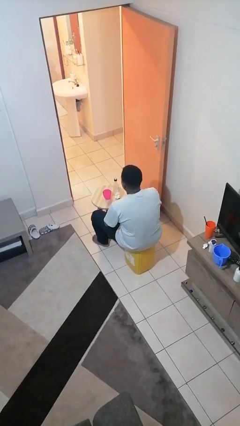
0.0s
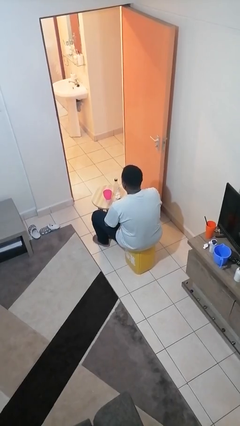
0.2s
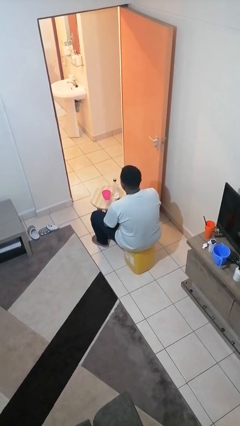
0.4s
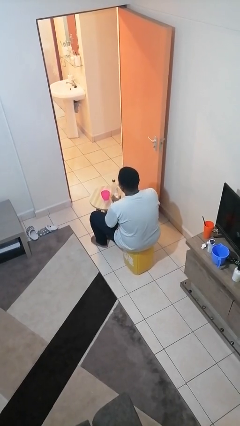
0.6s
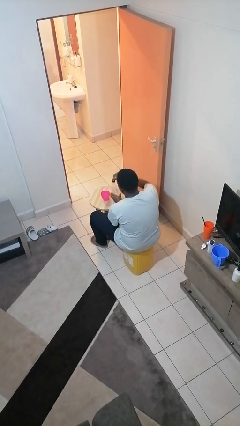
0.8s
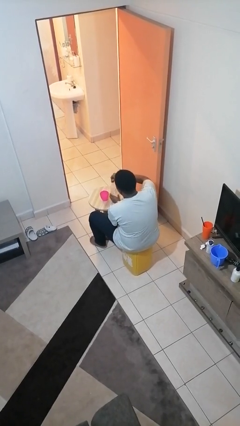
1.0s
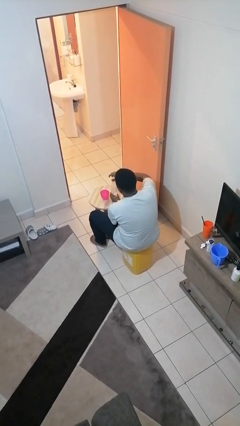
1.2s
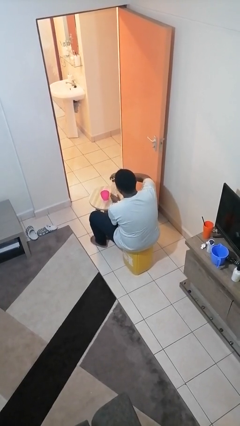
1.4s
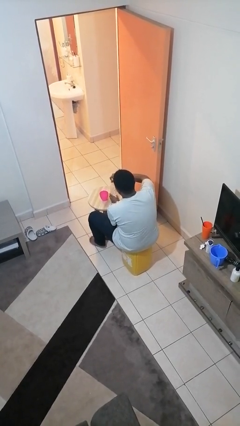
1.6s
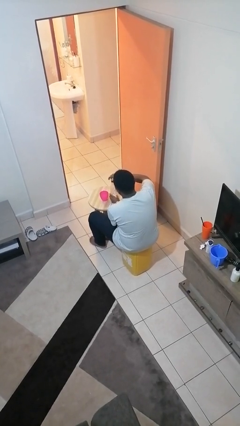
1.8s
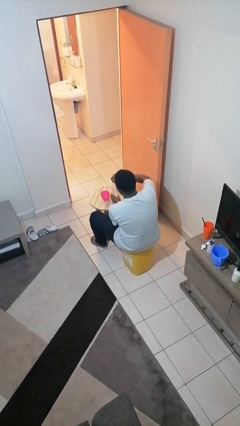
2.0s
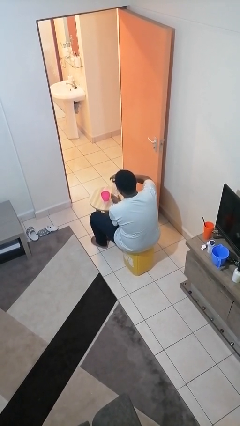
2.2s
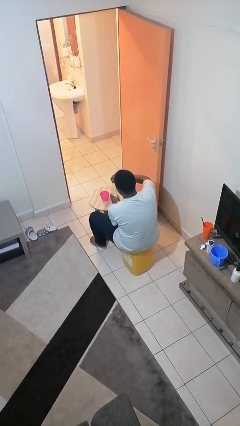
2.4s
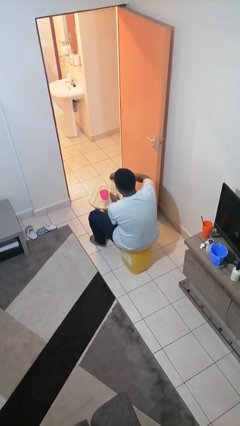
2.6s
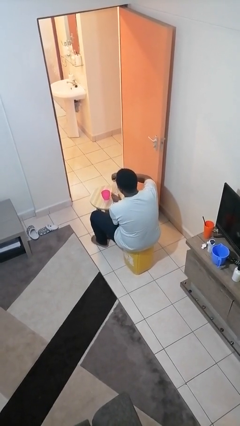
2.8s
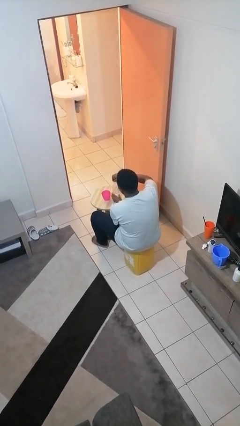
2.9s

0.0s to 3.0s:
person unscrews lid from bottle

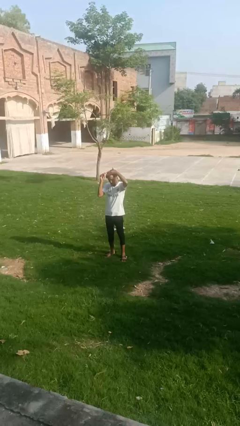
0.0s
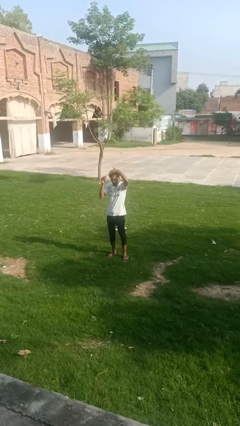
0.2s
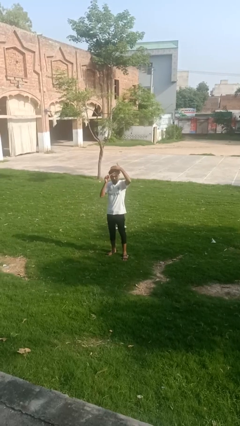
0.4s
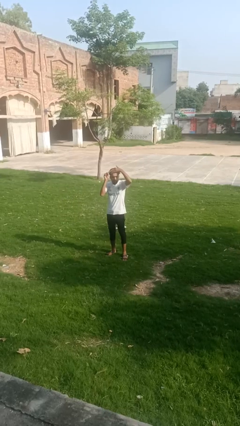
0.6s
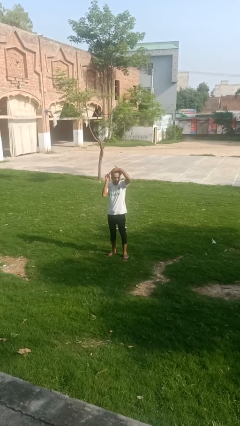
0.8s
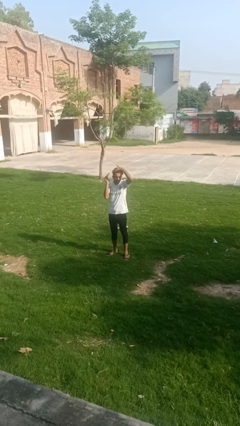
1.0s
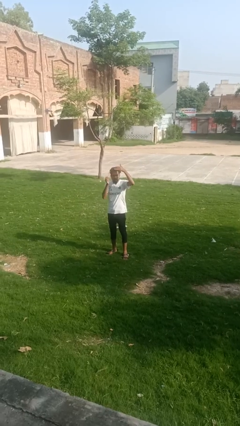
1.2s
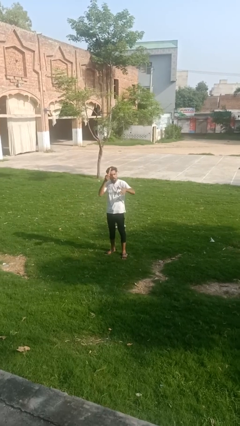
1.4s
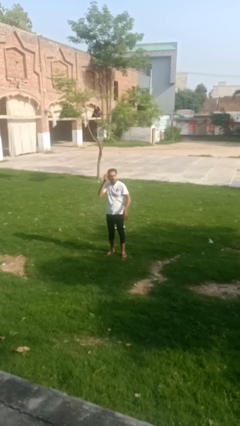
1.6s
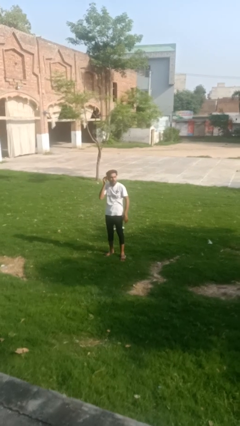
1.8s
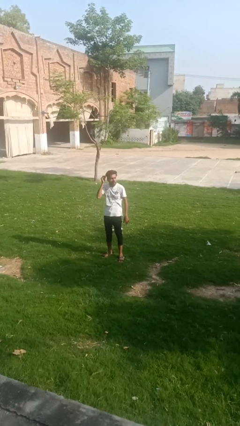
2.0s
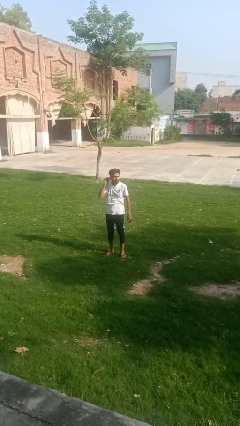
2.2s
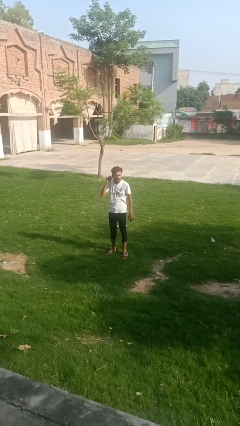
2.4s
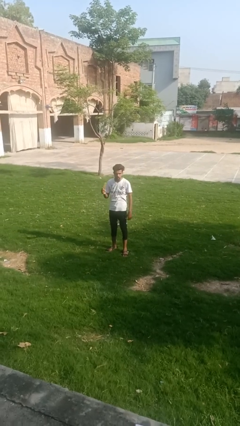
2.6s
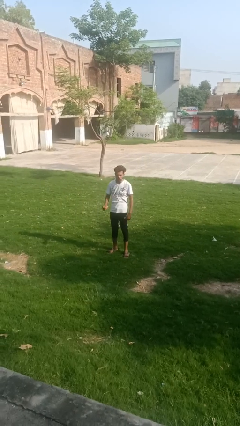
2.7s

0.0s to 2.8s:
person brushes hair

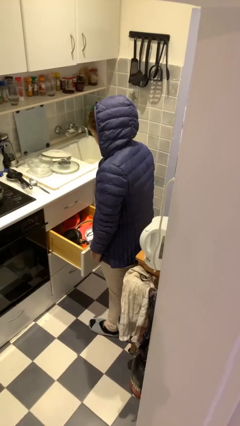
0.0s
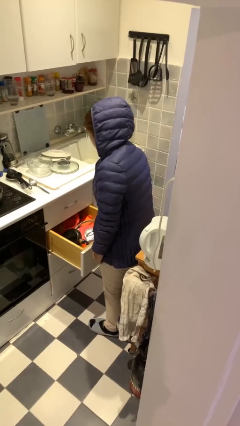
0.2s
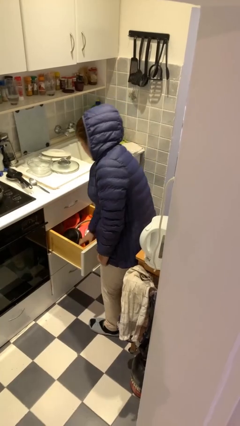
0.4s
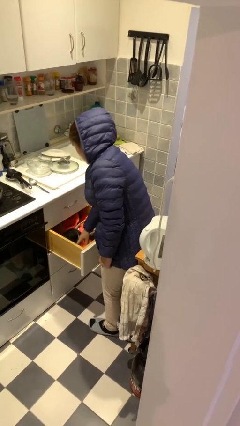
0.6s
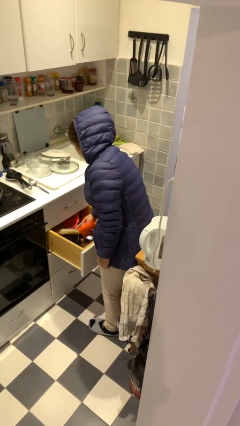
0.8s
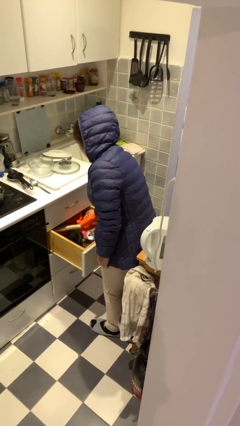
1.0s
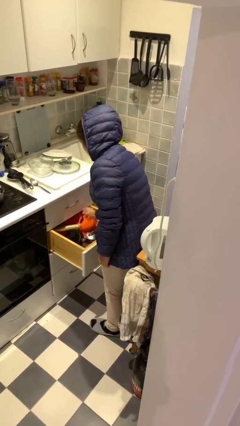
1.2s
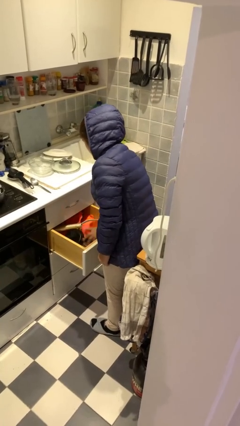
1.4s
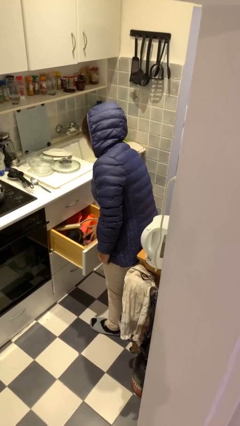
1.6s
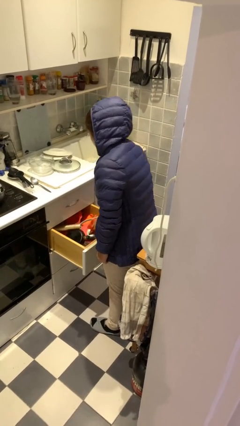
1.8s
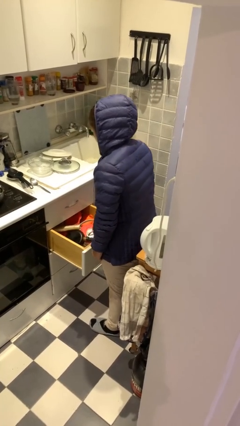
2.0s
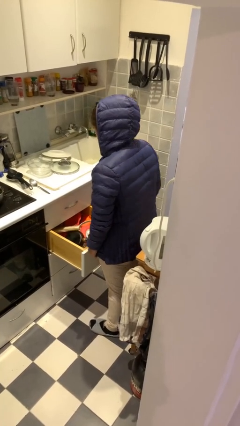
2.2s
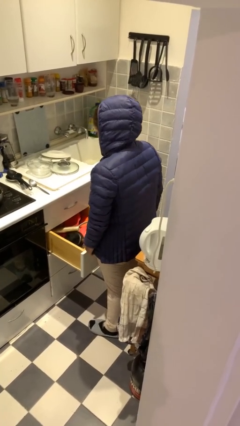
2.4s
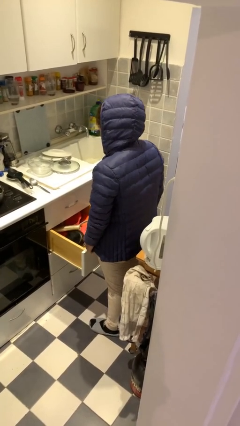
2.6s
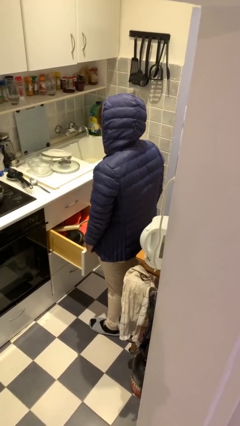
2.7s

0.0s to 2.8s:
person searches in kitchen drawer

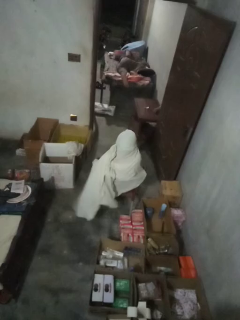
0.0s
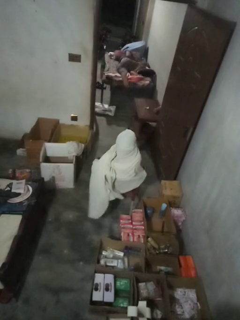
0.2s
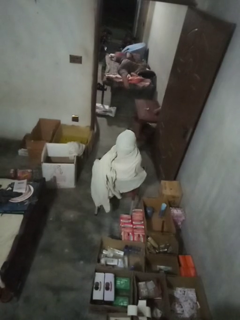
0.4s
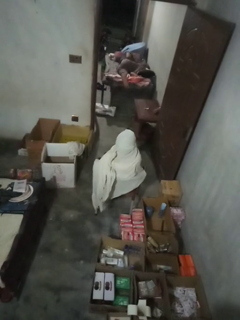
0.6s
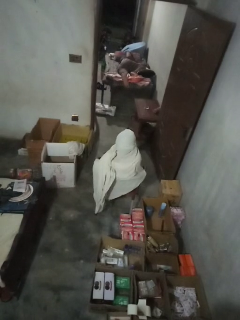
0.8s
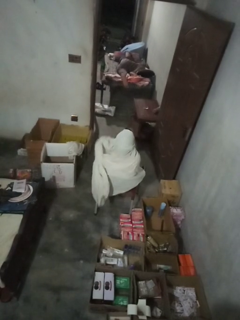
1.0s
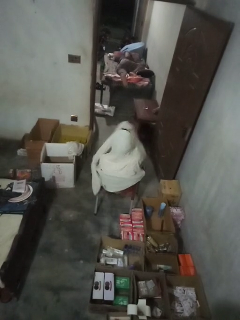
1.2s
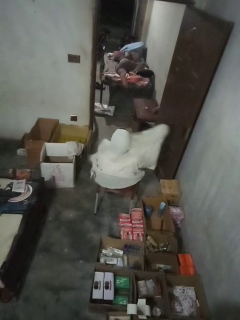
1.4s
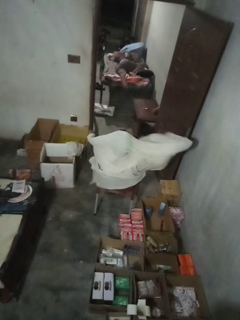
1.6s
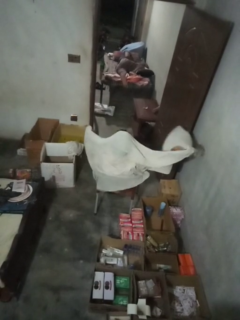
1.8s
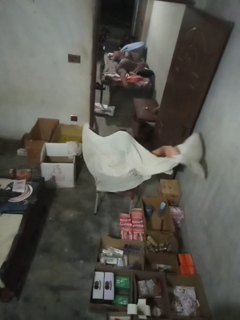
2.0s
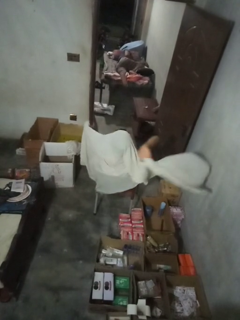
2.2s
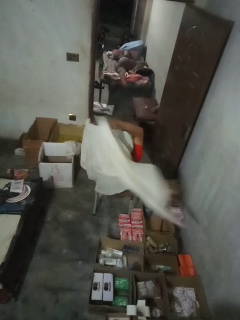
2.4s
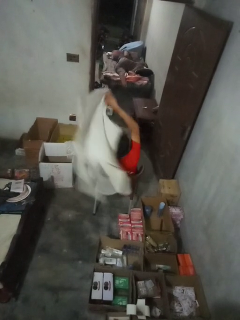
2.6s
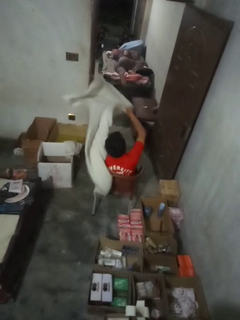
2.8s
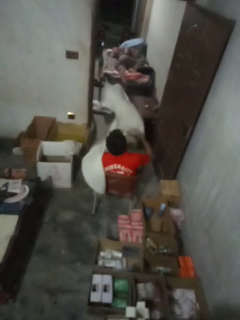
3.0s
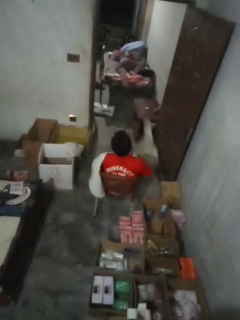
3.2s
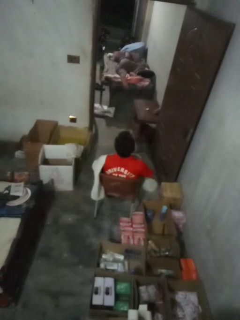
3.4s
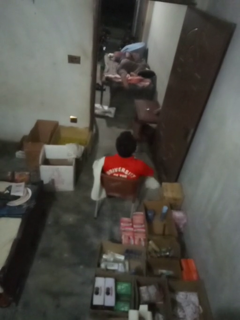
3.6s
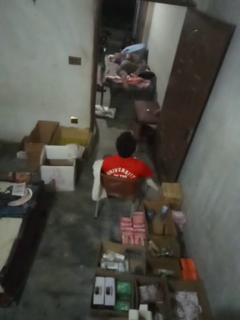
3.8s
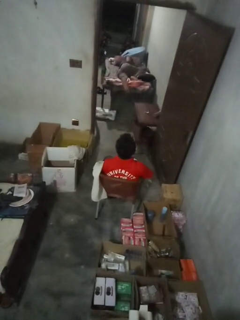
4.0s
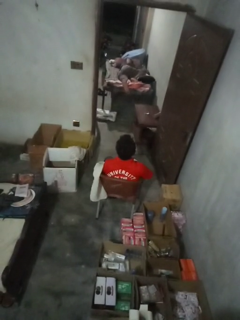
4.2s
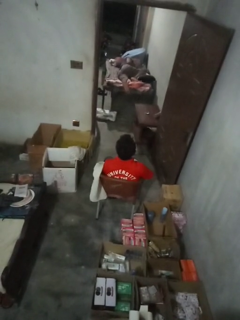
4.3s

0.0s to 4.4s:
person unfolds blanket

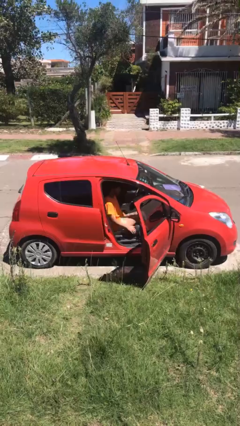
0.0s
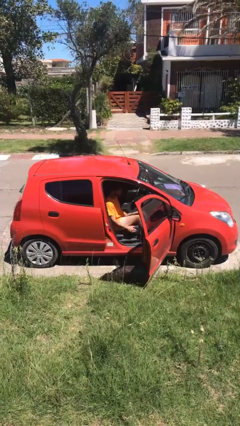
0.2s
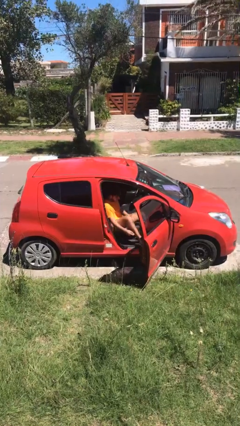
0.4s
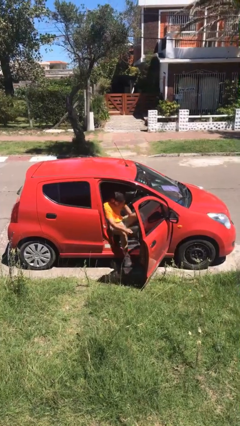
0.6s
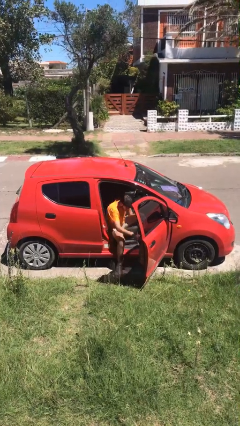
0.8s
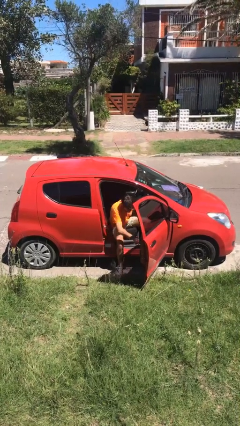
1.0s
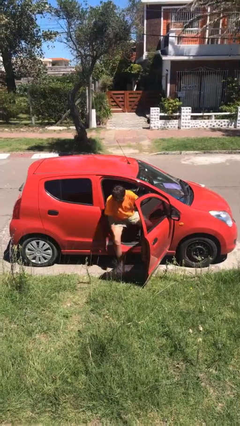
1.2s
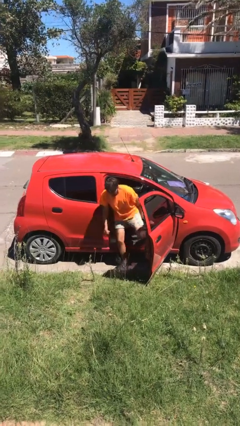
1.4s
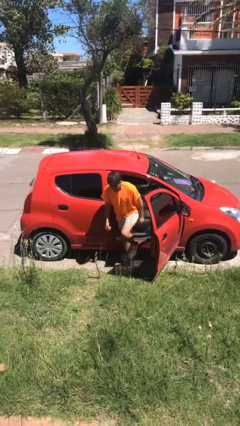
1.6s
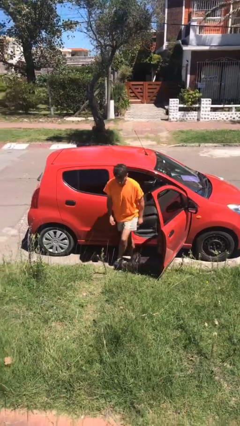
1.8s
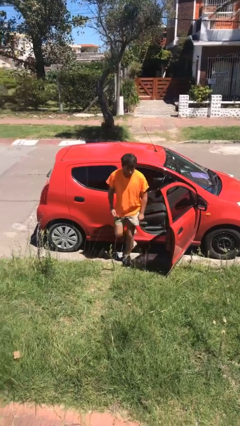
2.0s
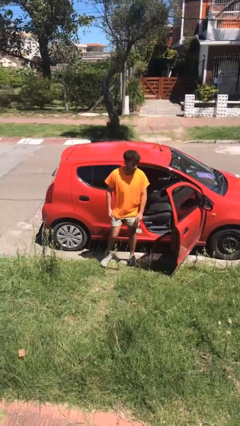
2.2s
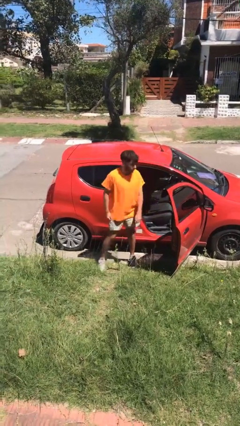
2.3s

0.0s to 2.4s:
person exits car

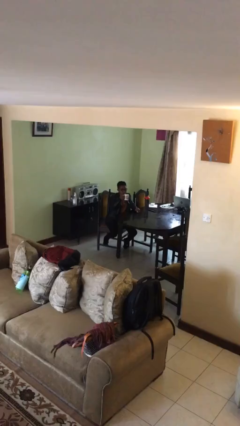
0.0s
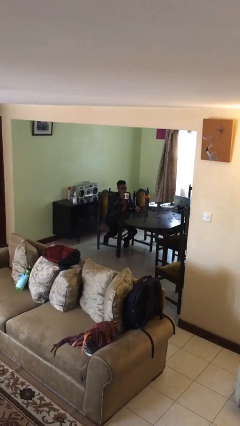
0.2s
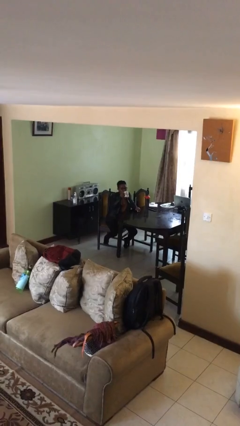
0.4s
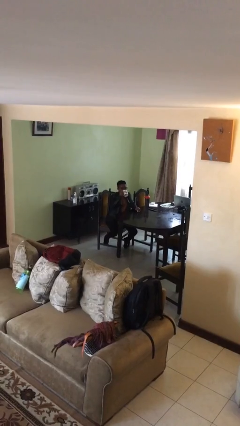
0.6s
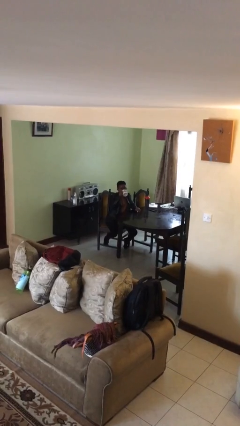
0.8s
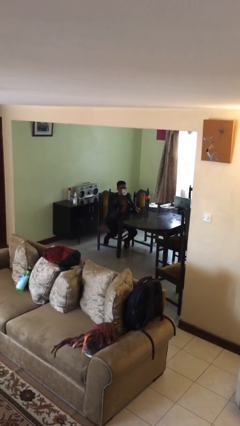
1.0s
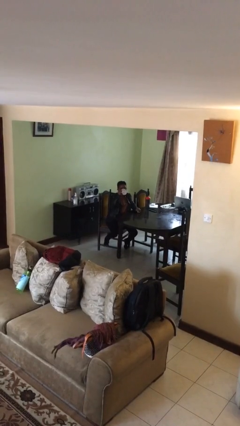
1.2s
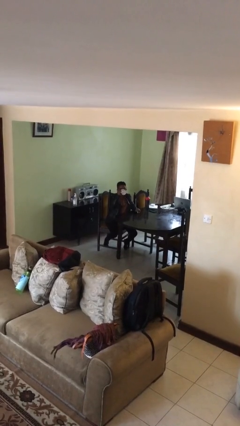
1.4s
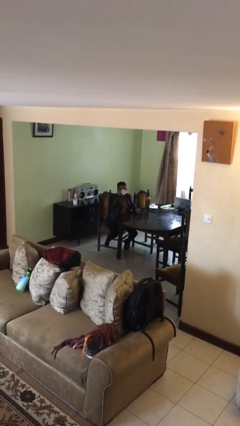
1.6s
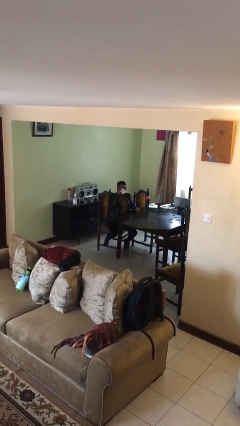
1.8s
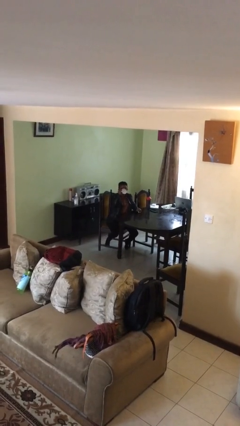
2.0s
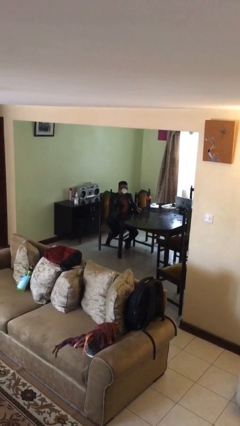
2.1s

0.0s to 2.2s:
person drinks from mug

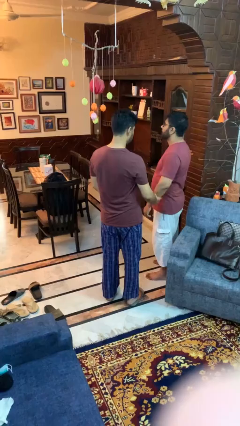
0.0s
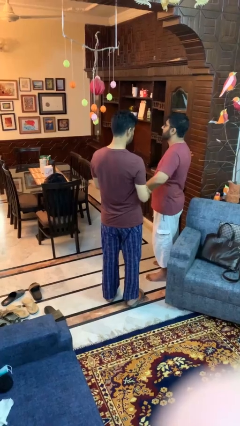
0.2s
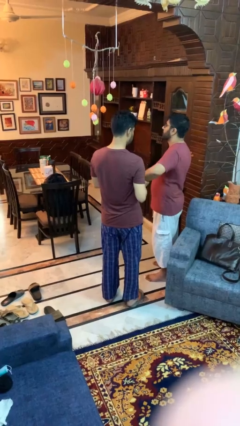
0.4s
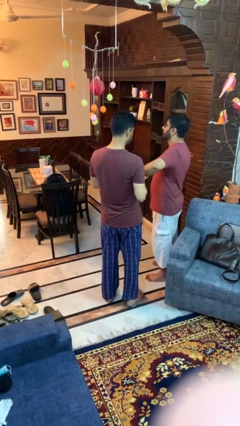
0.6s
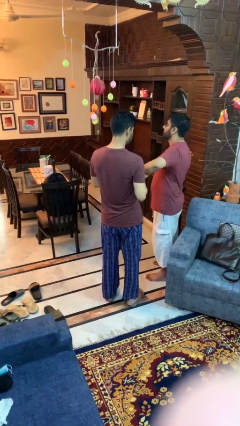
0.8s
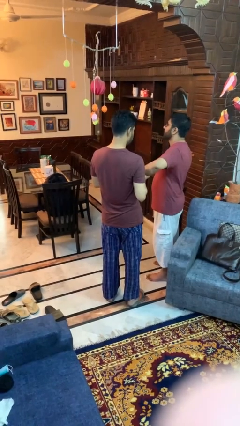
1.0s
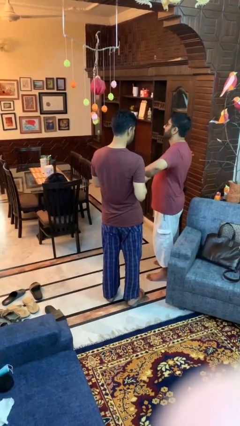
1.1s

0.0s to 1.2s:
person grabs person by forearm
